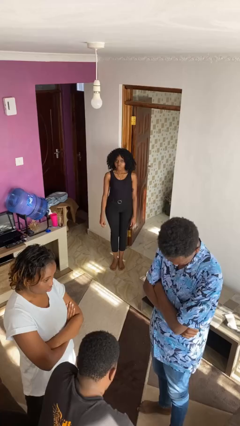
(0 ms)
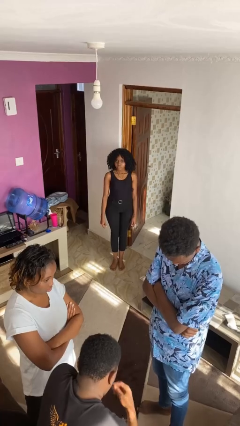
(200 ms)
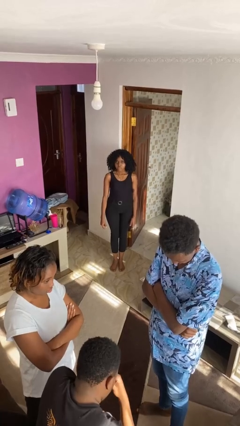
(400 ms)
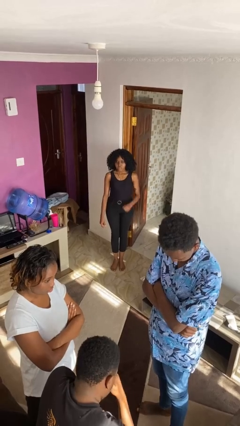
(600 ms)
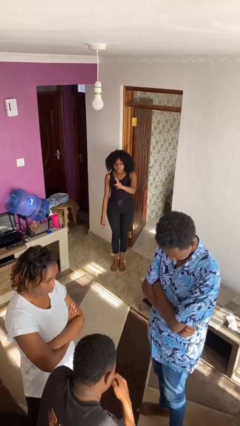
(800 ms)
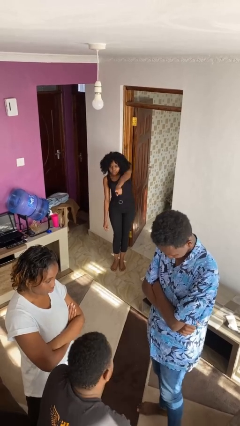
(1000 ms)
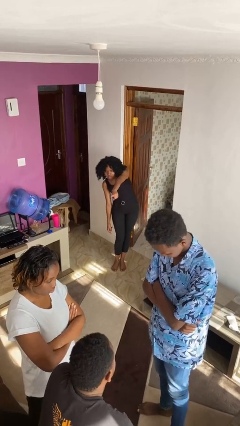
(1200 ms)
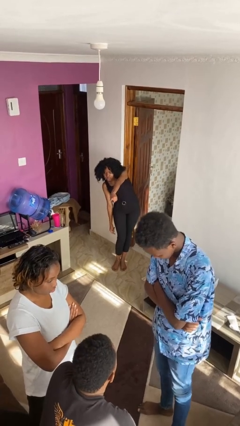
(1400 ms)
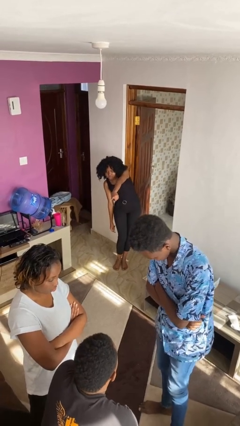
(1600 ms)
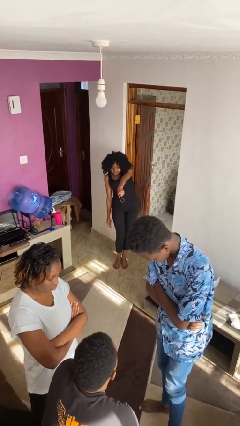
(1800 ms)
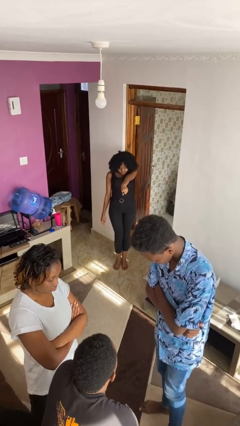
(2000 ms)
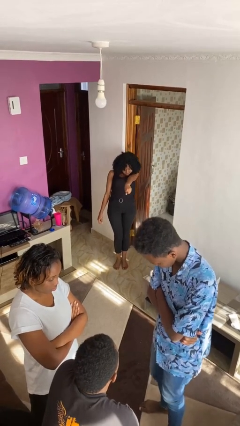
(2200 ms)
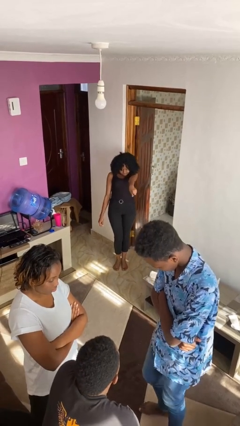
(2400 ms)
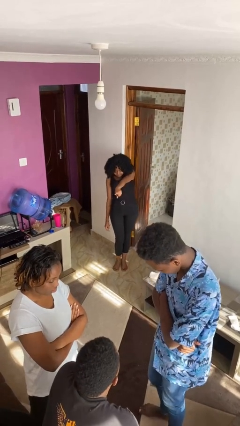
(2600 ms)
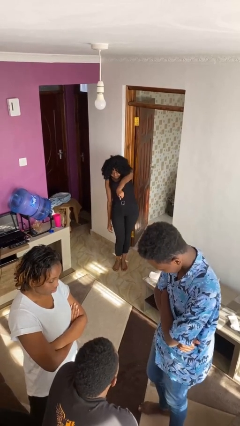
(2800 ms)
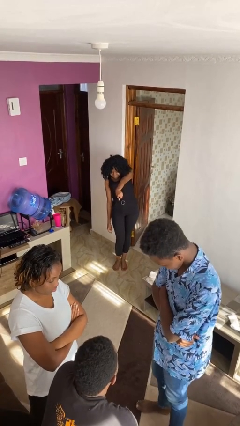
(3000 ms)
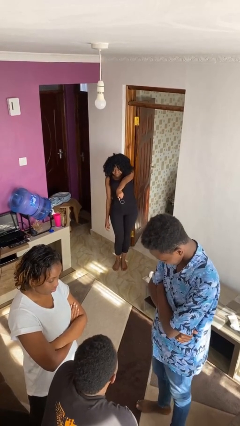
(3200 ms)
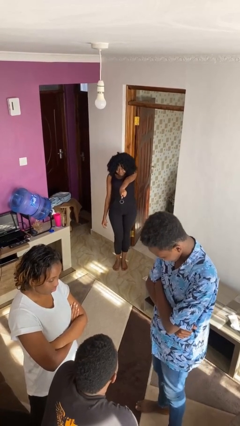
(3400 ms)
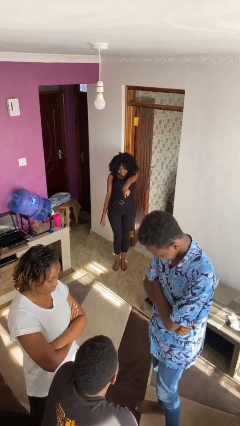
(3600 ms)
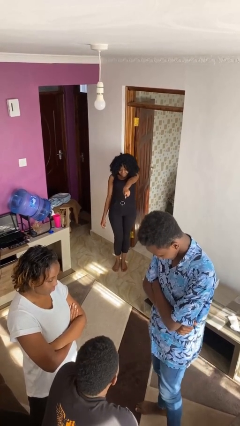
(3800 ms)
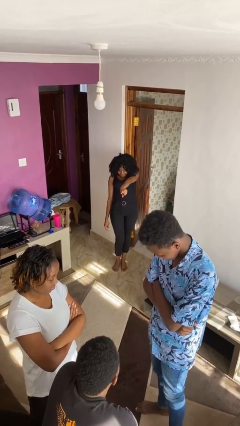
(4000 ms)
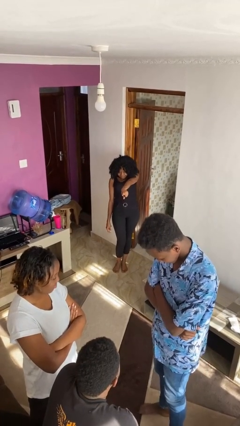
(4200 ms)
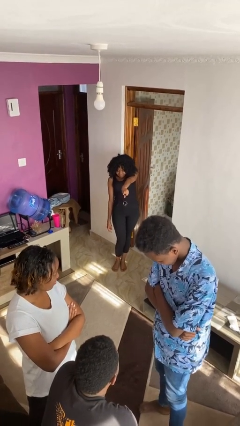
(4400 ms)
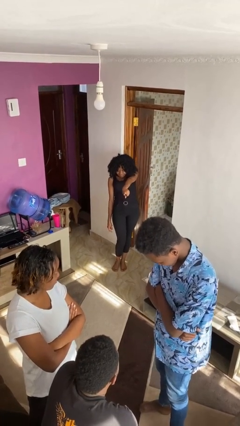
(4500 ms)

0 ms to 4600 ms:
person points at person

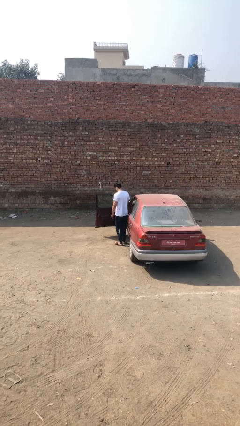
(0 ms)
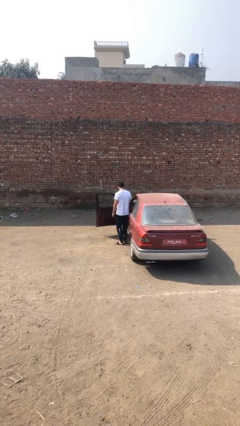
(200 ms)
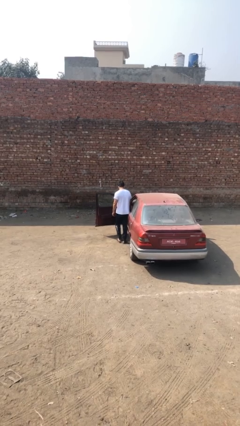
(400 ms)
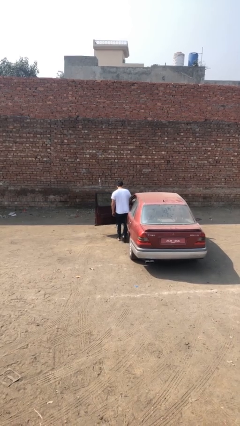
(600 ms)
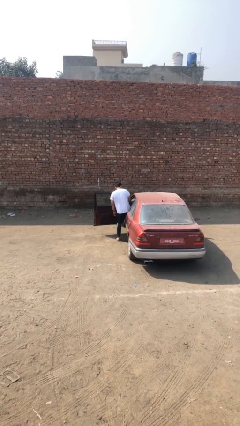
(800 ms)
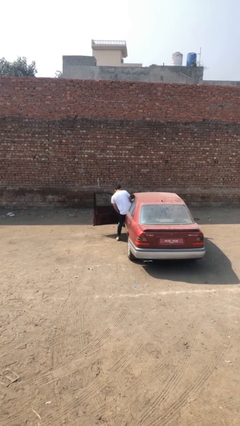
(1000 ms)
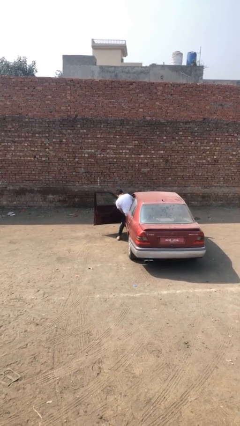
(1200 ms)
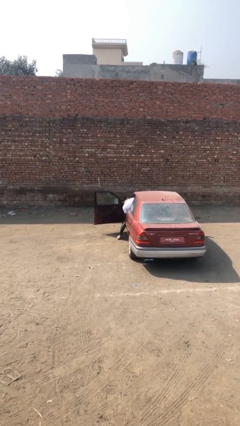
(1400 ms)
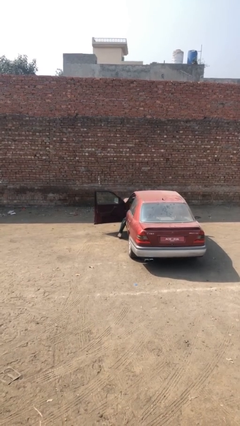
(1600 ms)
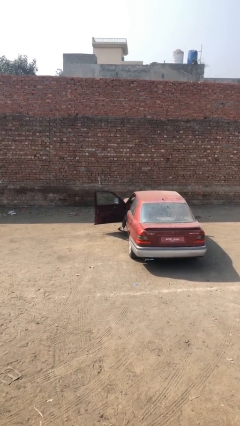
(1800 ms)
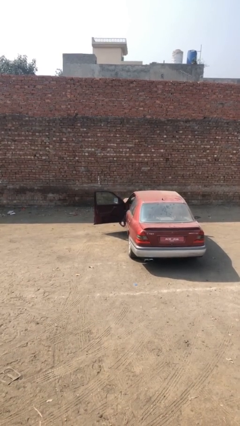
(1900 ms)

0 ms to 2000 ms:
person enters car

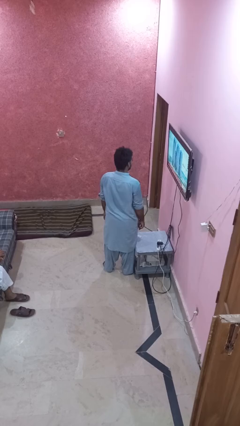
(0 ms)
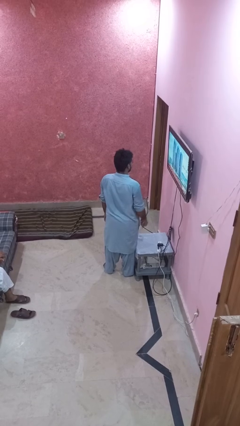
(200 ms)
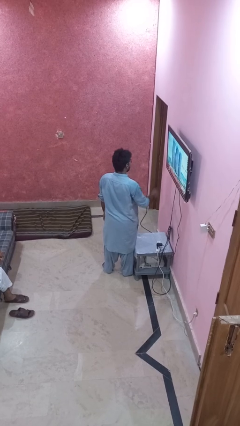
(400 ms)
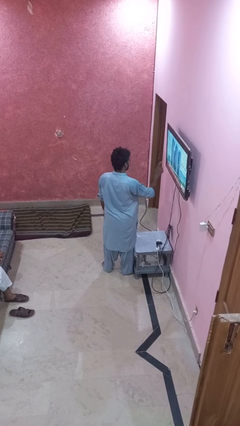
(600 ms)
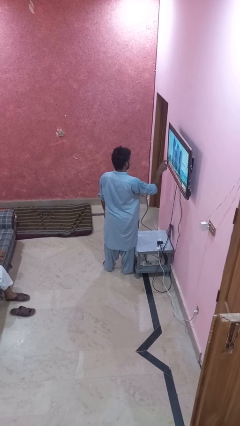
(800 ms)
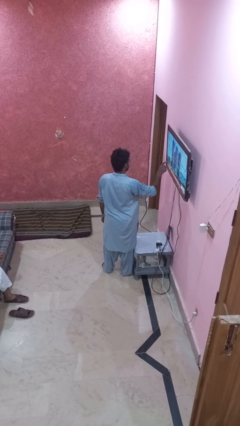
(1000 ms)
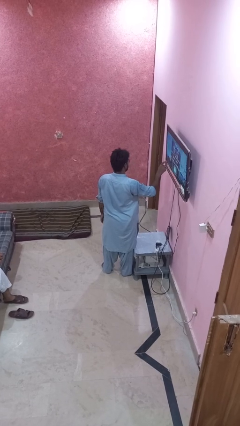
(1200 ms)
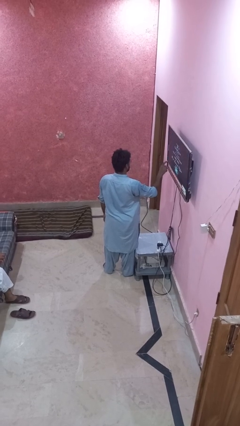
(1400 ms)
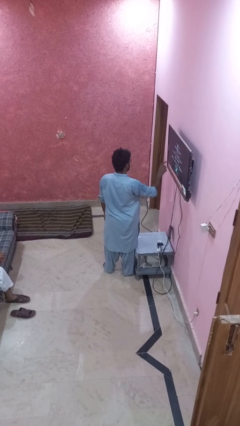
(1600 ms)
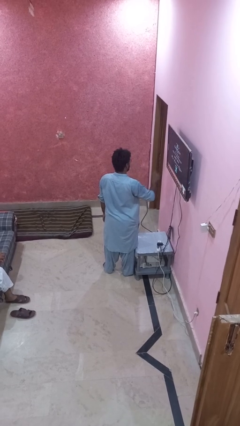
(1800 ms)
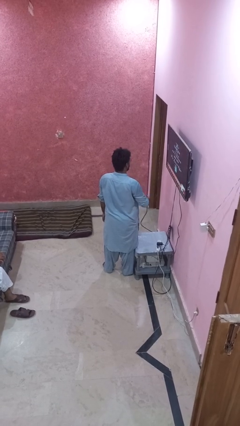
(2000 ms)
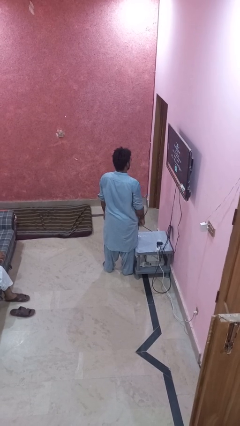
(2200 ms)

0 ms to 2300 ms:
person taps object with finger

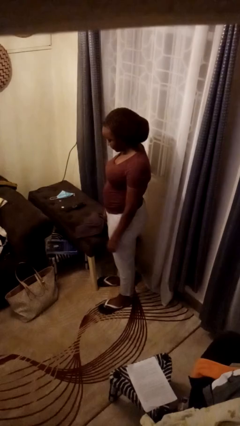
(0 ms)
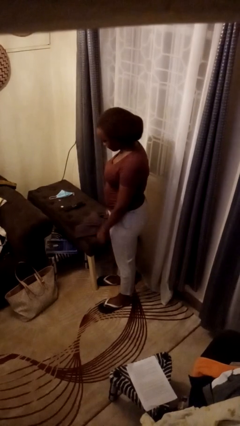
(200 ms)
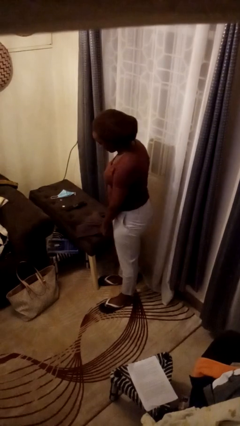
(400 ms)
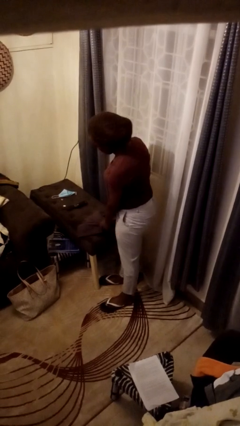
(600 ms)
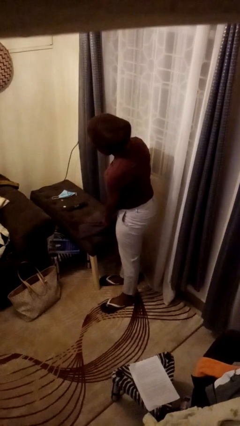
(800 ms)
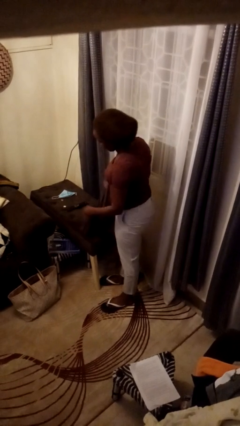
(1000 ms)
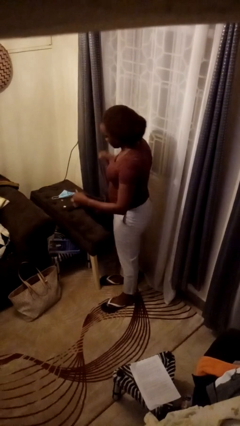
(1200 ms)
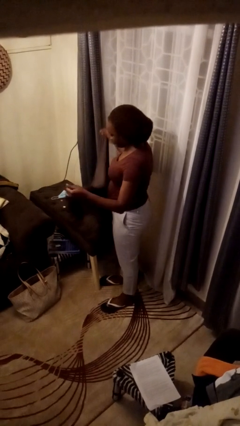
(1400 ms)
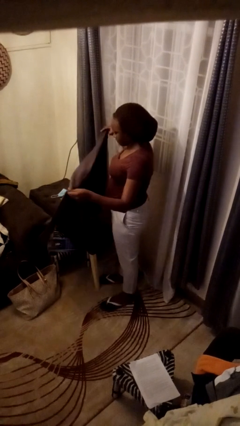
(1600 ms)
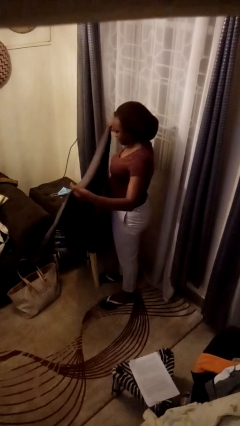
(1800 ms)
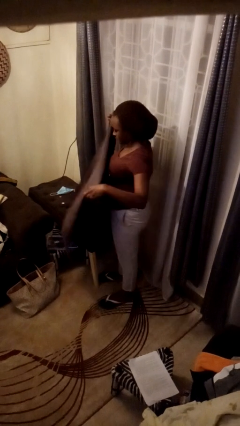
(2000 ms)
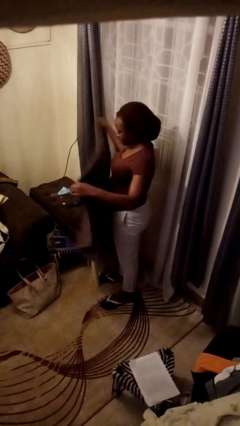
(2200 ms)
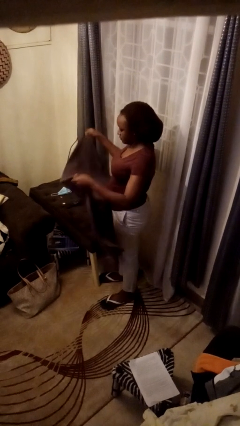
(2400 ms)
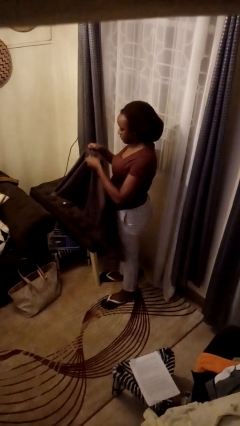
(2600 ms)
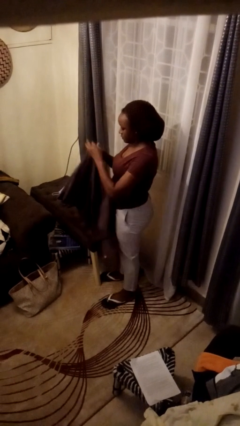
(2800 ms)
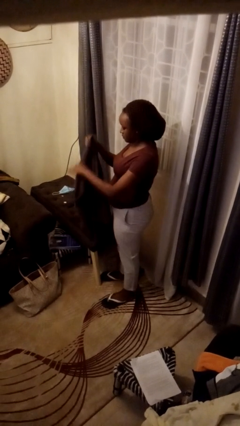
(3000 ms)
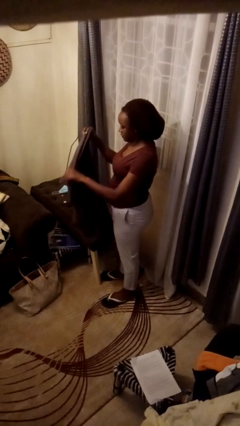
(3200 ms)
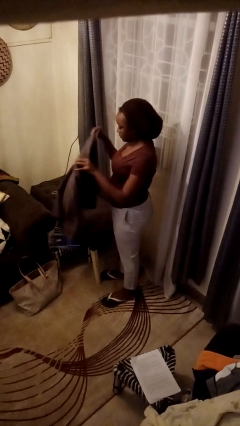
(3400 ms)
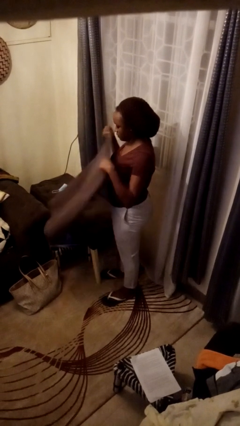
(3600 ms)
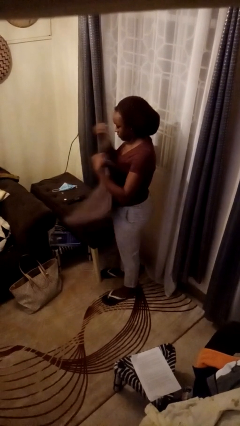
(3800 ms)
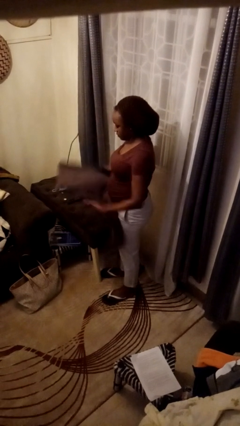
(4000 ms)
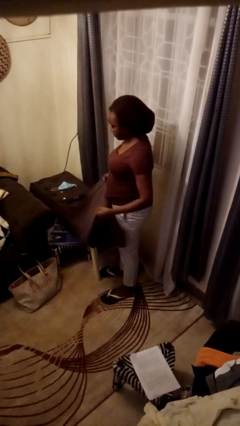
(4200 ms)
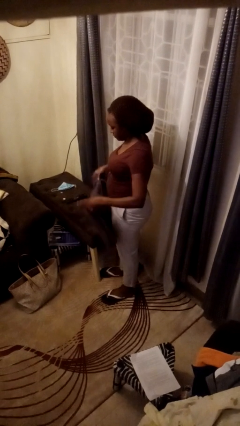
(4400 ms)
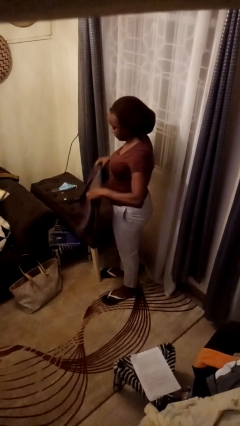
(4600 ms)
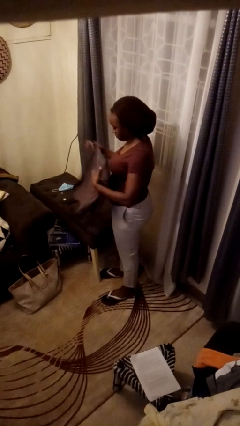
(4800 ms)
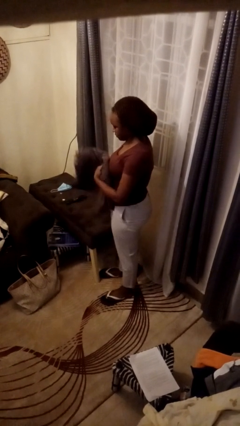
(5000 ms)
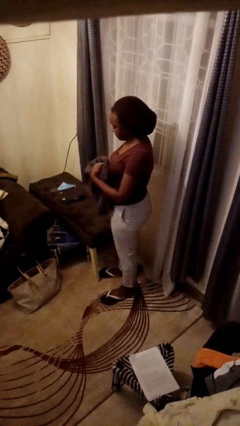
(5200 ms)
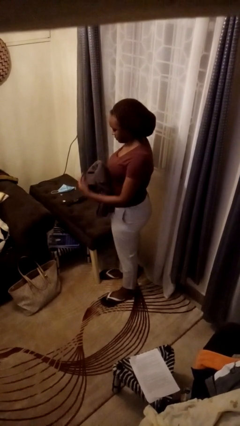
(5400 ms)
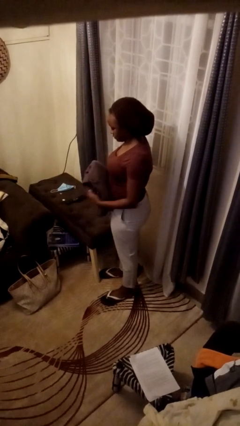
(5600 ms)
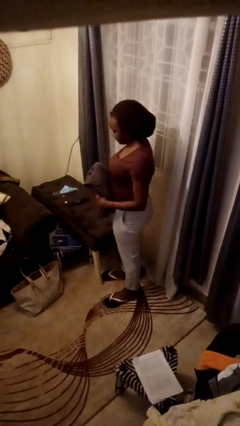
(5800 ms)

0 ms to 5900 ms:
person folds blanket

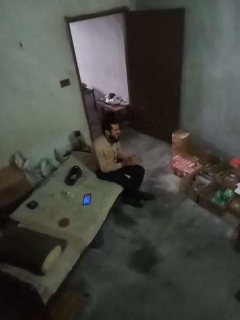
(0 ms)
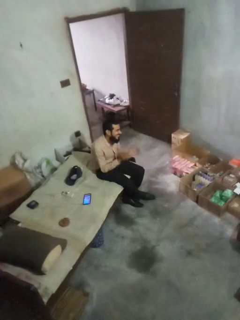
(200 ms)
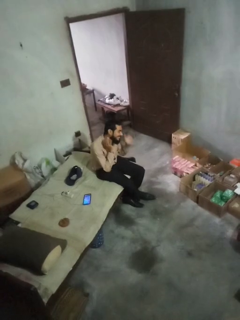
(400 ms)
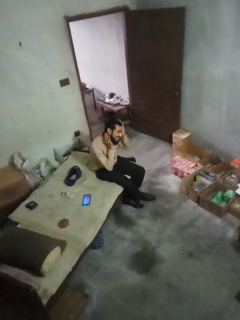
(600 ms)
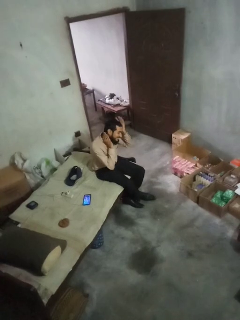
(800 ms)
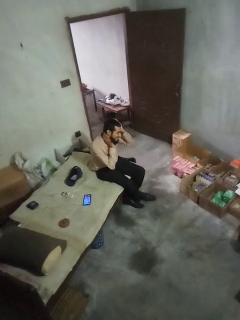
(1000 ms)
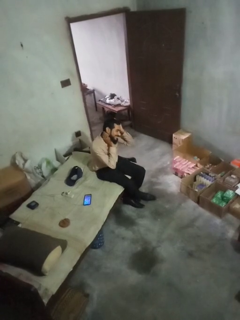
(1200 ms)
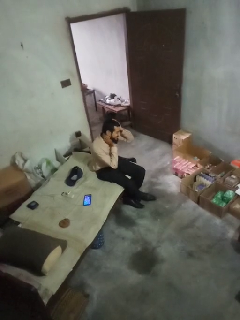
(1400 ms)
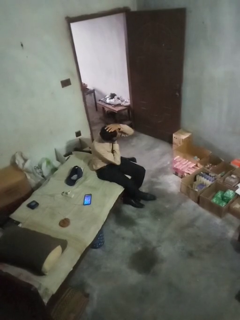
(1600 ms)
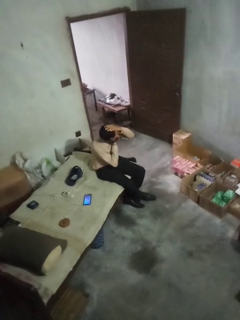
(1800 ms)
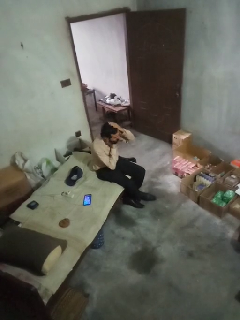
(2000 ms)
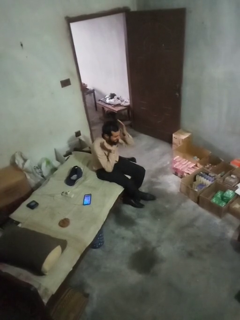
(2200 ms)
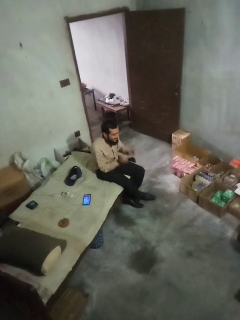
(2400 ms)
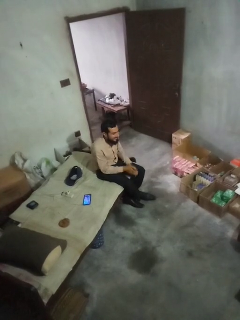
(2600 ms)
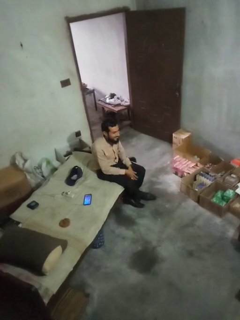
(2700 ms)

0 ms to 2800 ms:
person cracks knuckles

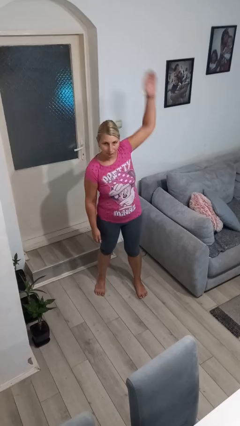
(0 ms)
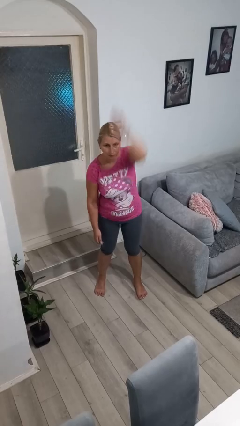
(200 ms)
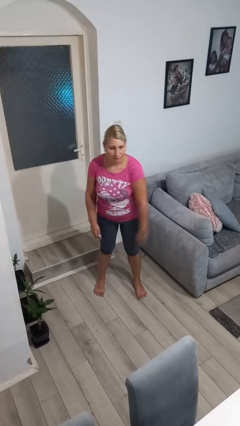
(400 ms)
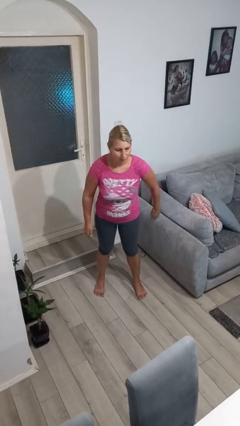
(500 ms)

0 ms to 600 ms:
person punches
